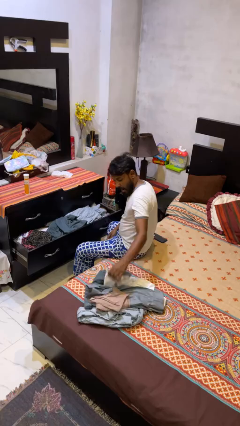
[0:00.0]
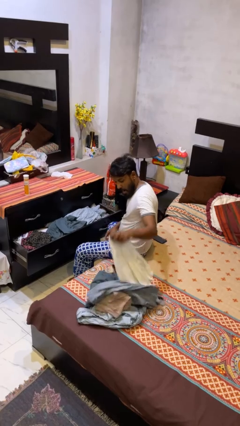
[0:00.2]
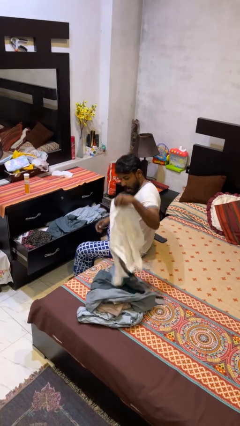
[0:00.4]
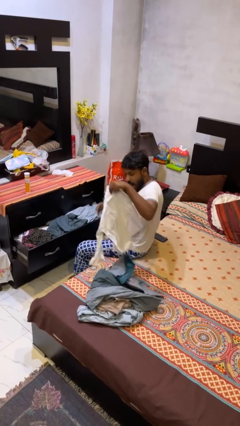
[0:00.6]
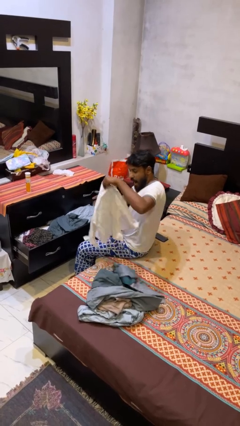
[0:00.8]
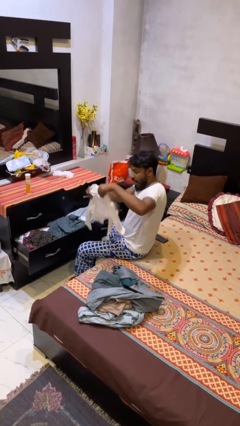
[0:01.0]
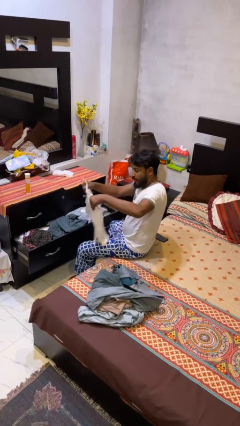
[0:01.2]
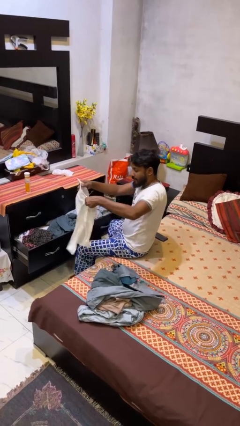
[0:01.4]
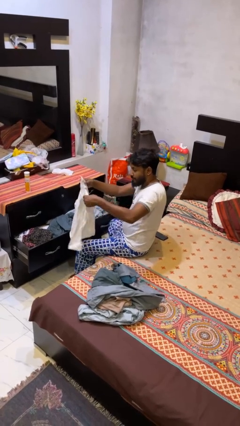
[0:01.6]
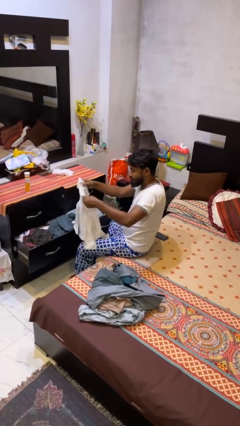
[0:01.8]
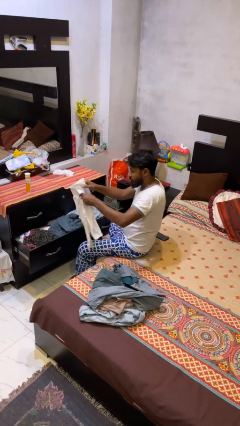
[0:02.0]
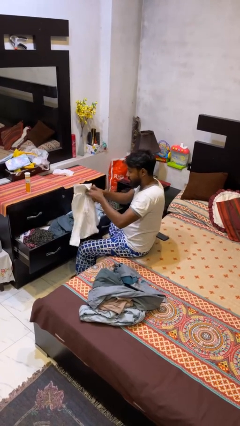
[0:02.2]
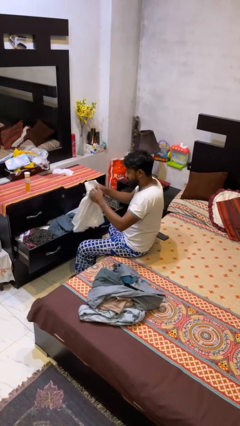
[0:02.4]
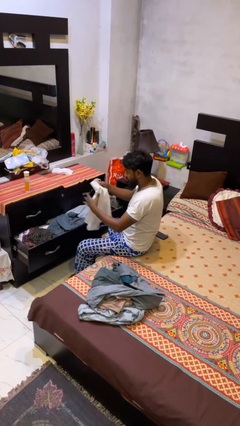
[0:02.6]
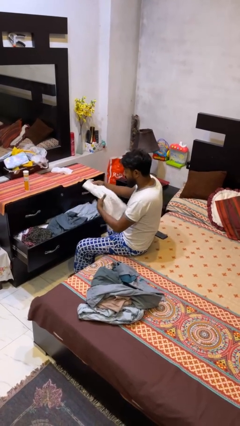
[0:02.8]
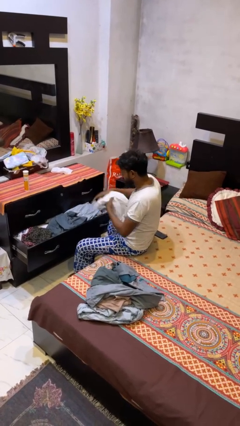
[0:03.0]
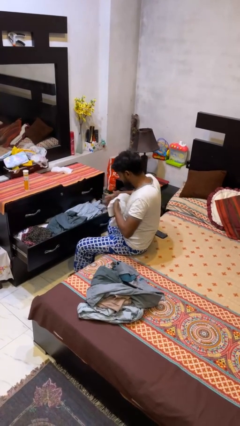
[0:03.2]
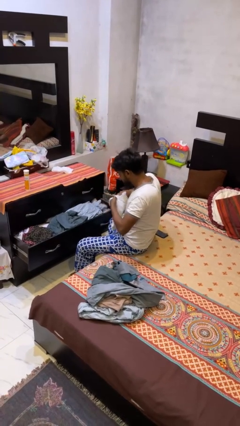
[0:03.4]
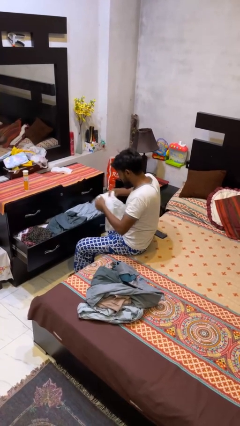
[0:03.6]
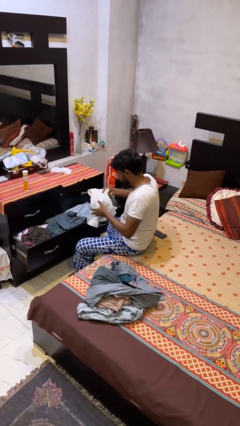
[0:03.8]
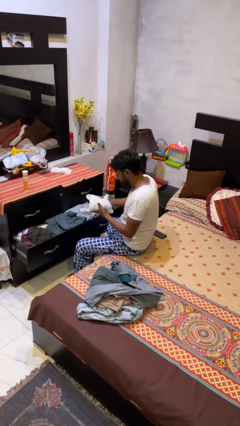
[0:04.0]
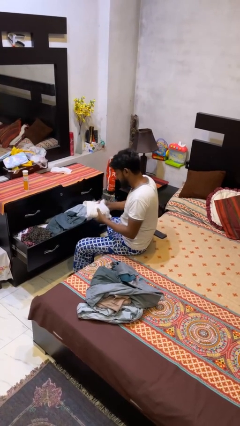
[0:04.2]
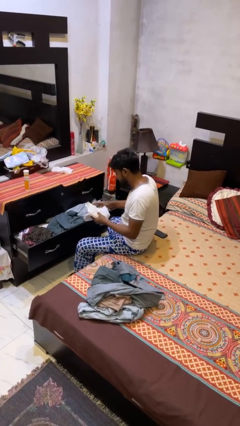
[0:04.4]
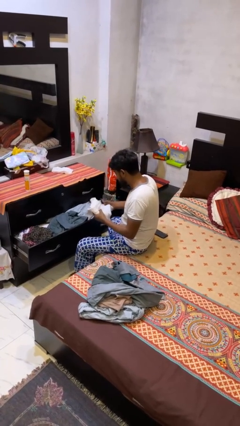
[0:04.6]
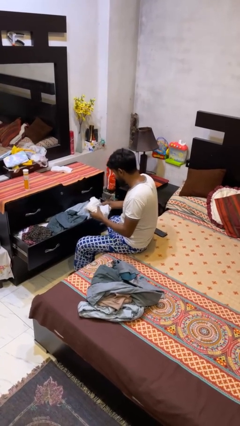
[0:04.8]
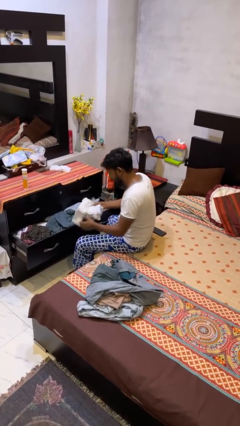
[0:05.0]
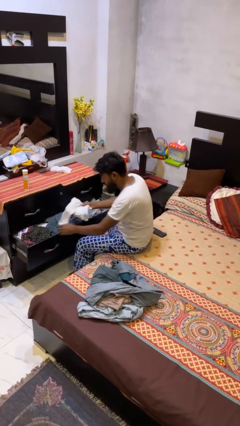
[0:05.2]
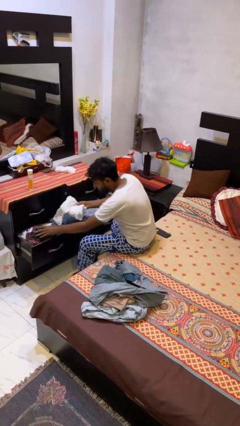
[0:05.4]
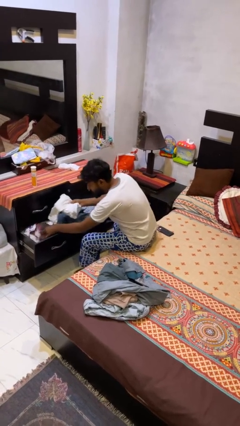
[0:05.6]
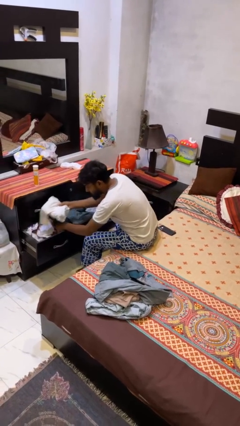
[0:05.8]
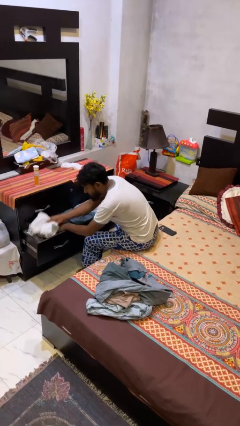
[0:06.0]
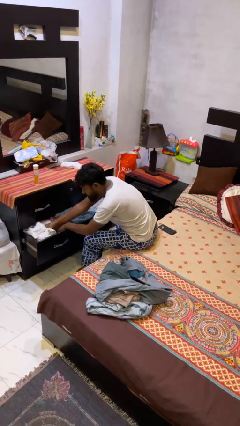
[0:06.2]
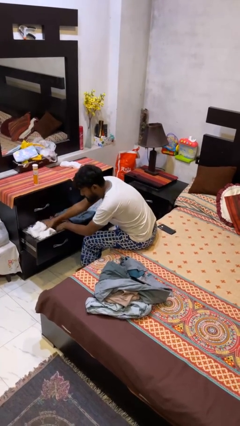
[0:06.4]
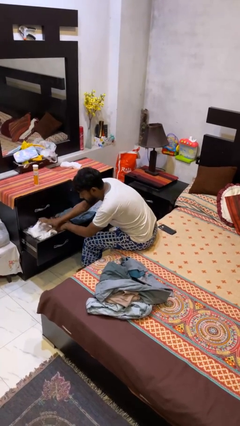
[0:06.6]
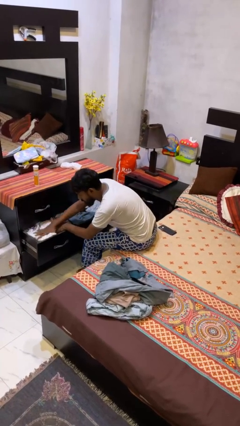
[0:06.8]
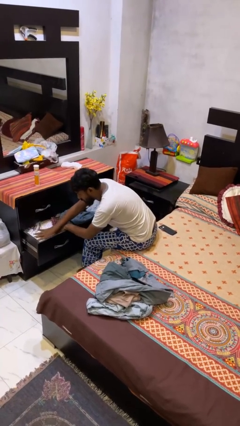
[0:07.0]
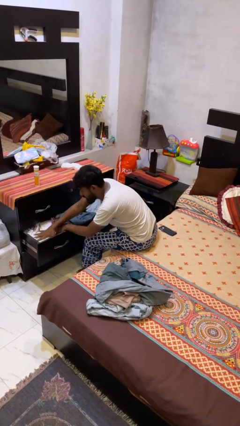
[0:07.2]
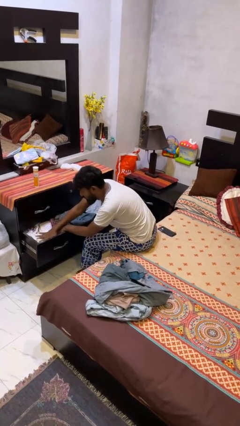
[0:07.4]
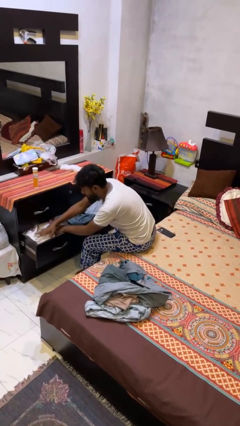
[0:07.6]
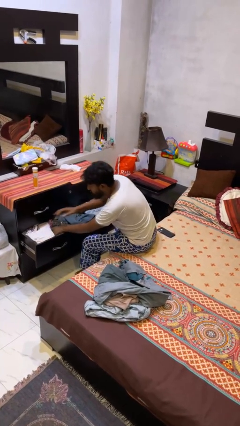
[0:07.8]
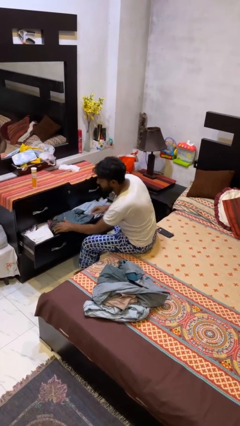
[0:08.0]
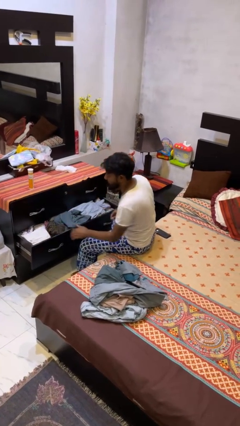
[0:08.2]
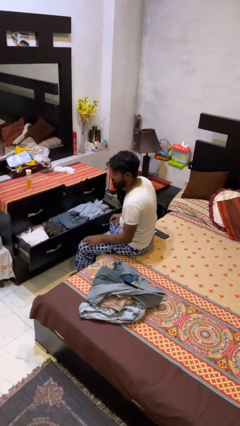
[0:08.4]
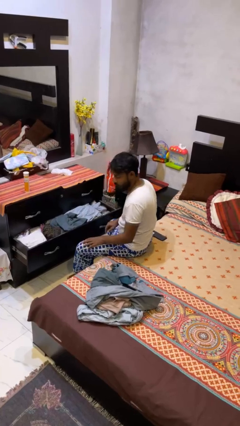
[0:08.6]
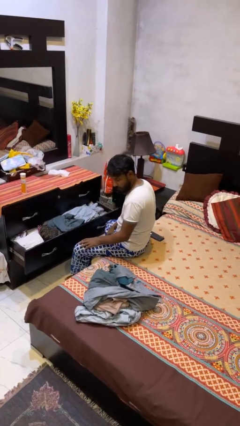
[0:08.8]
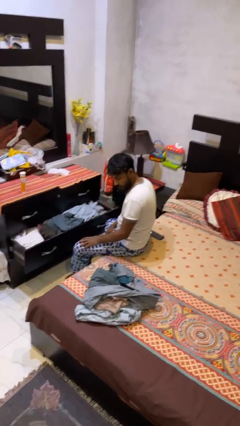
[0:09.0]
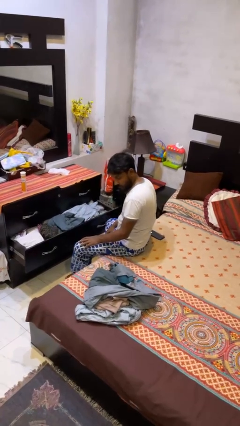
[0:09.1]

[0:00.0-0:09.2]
person puts clothes into dresser

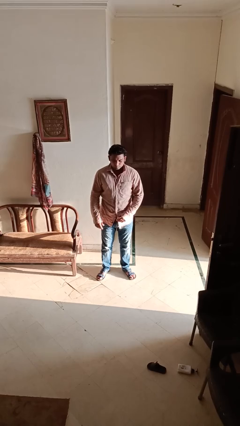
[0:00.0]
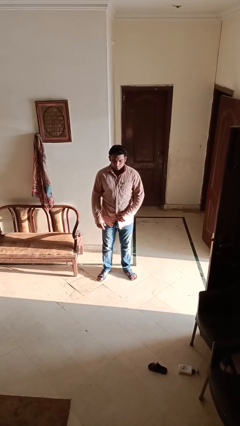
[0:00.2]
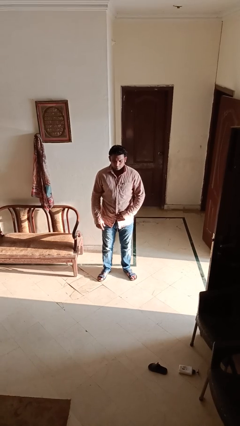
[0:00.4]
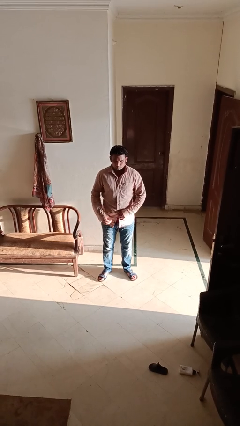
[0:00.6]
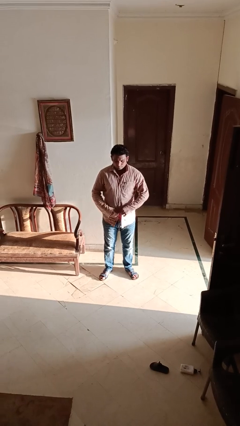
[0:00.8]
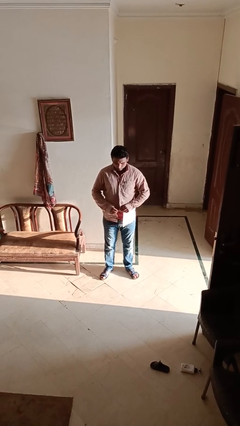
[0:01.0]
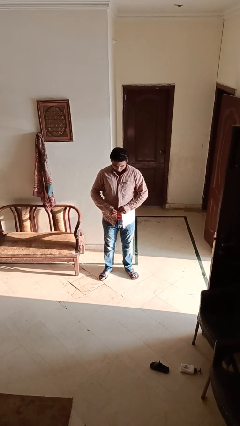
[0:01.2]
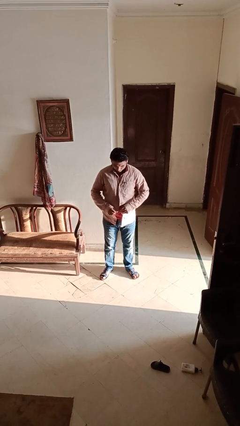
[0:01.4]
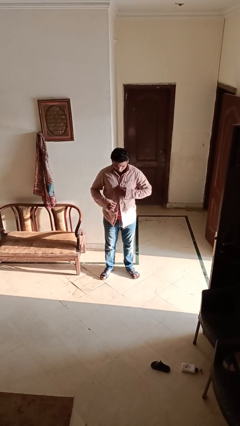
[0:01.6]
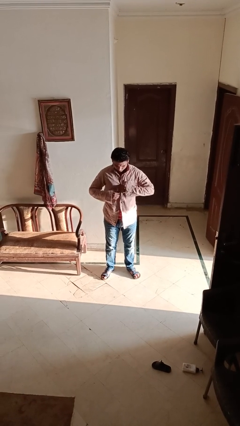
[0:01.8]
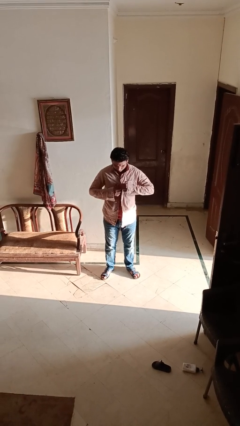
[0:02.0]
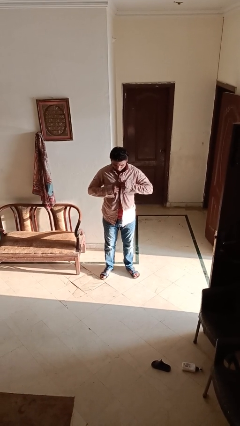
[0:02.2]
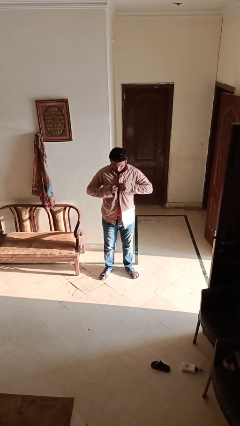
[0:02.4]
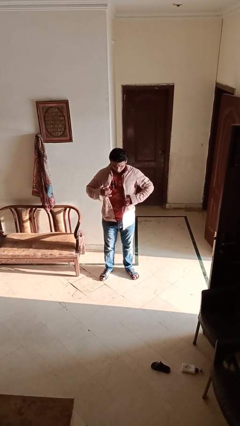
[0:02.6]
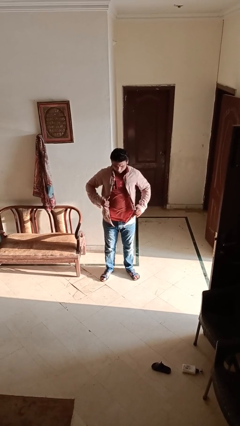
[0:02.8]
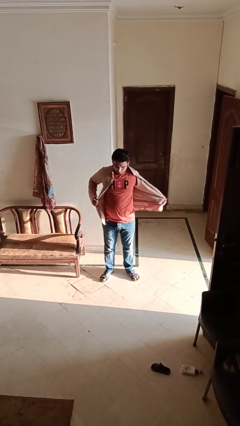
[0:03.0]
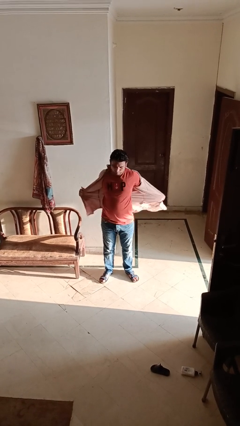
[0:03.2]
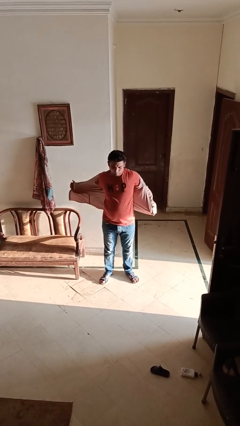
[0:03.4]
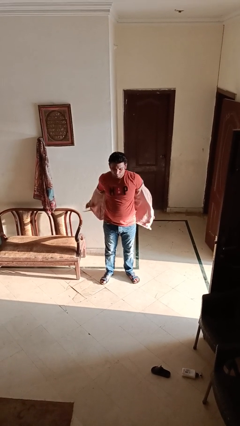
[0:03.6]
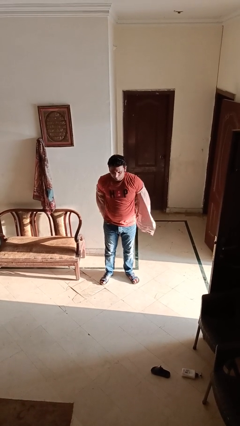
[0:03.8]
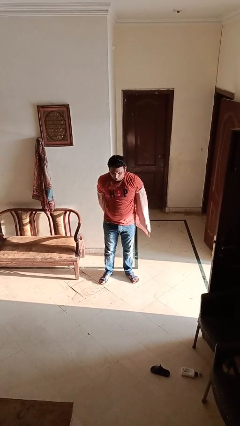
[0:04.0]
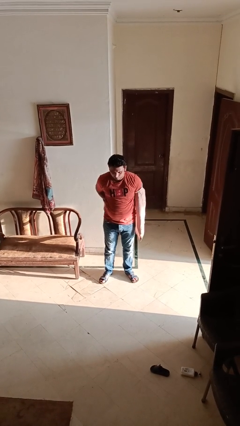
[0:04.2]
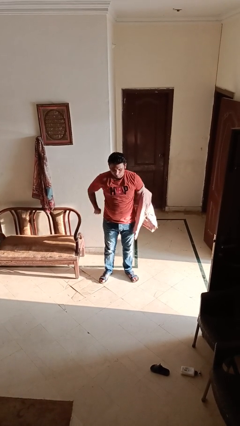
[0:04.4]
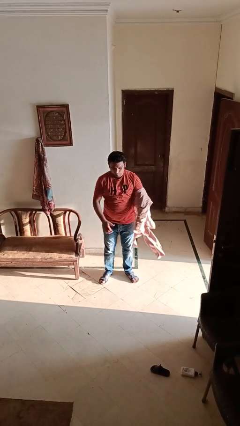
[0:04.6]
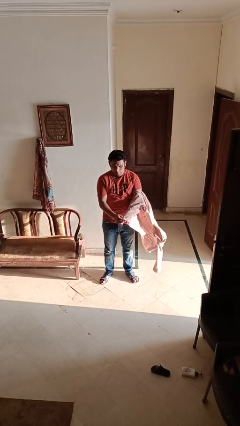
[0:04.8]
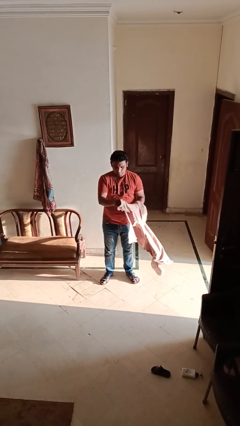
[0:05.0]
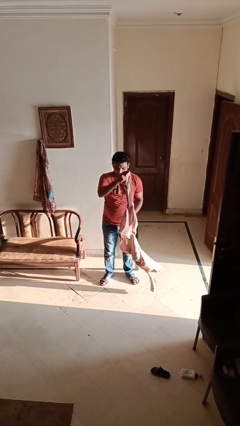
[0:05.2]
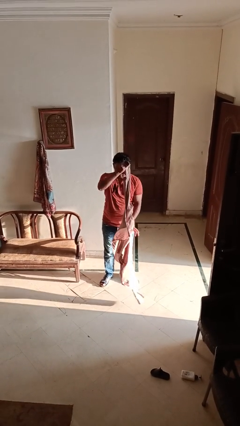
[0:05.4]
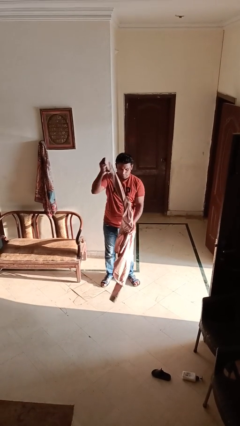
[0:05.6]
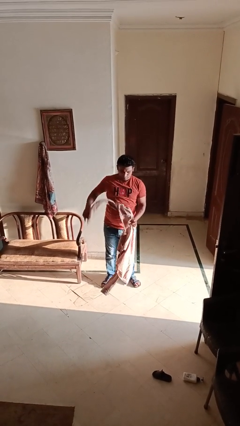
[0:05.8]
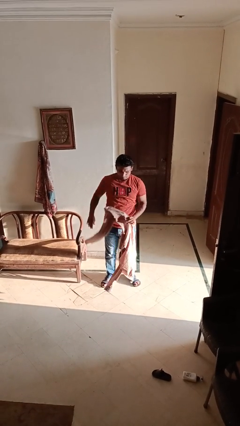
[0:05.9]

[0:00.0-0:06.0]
person takes off shirt

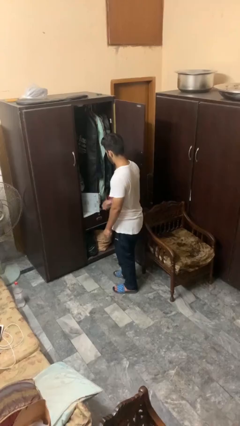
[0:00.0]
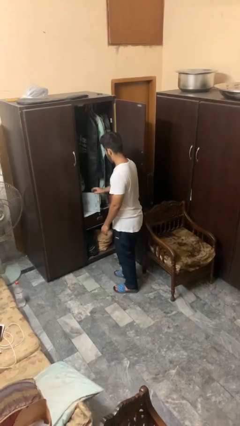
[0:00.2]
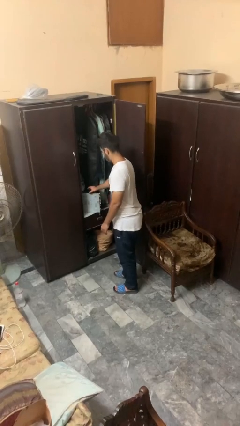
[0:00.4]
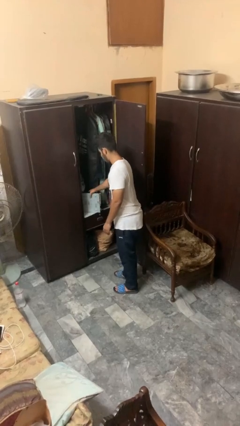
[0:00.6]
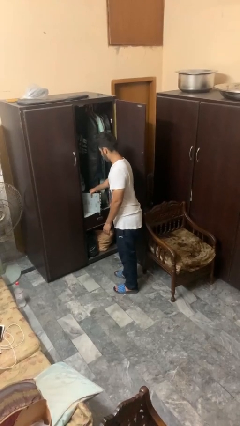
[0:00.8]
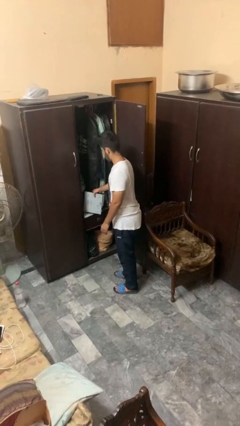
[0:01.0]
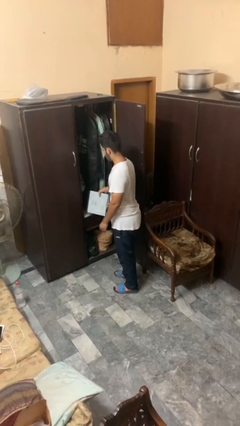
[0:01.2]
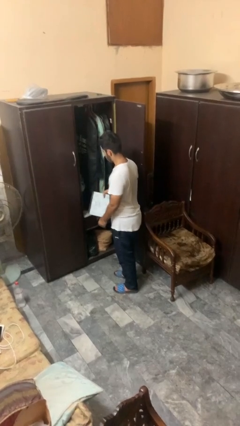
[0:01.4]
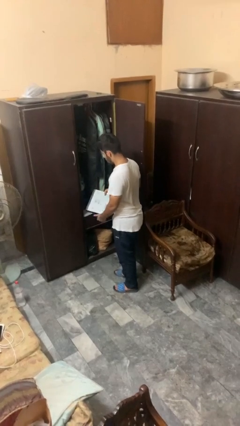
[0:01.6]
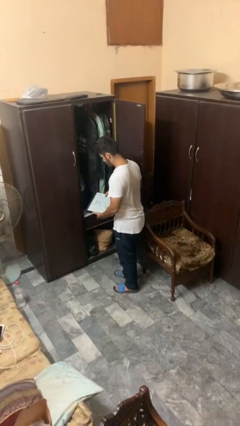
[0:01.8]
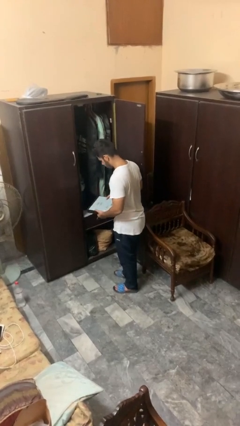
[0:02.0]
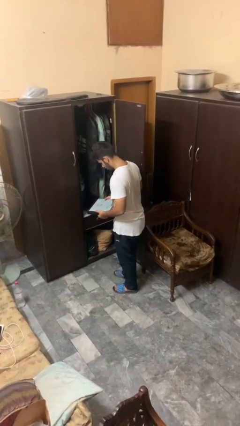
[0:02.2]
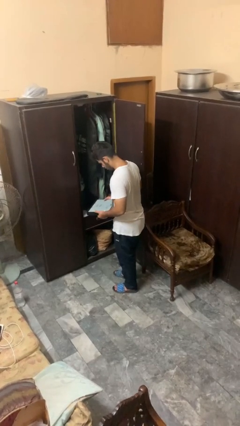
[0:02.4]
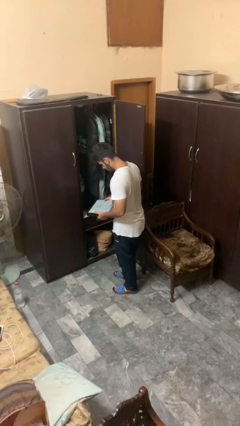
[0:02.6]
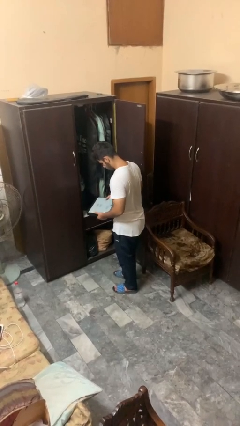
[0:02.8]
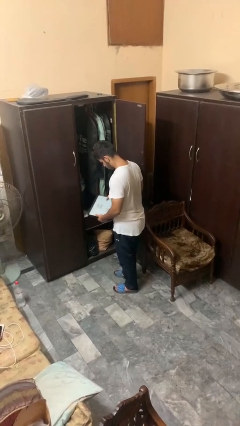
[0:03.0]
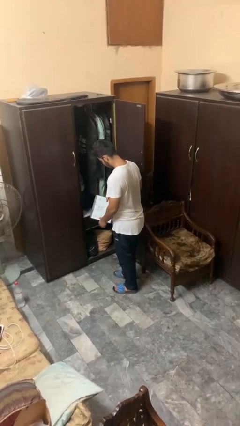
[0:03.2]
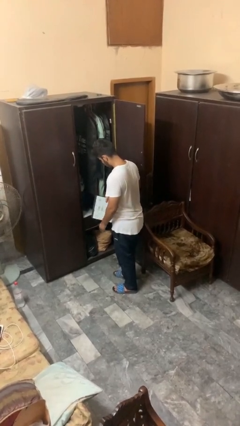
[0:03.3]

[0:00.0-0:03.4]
person picks up object from countertop
